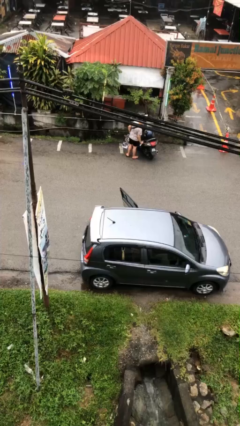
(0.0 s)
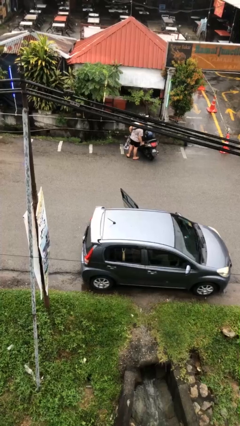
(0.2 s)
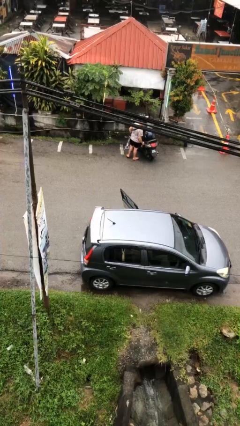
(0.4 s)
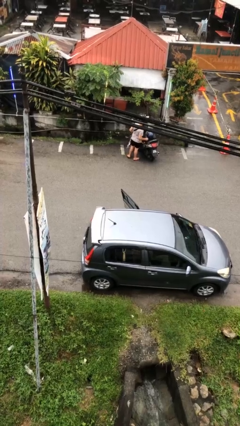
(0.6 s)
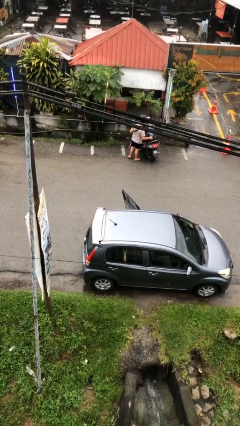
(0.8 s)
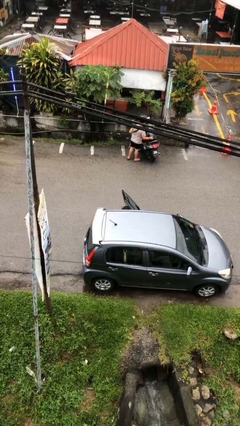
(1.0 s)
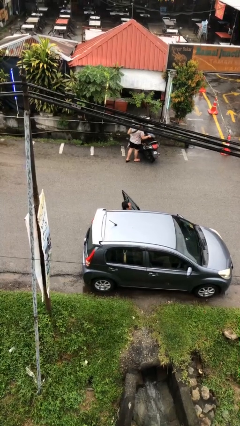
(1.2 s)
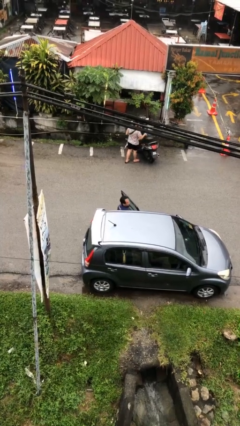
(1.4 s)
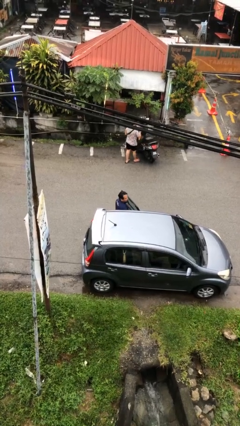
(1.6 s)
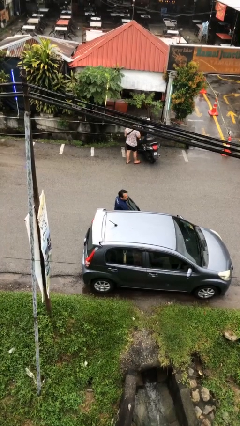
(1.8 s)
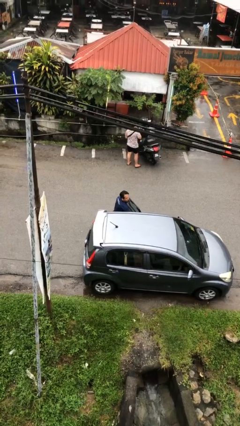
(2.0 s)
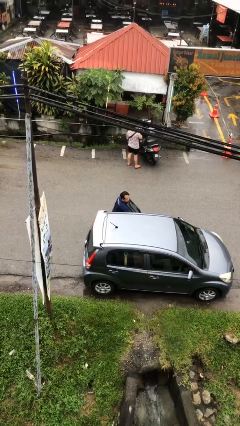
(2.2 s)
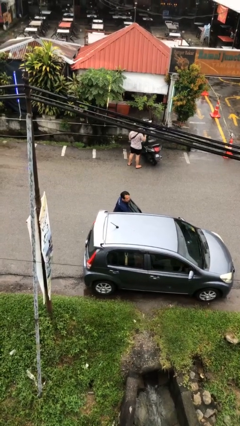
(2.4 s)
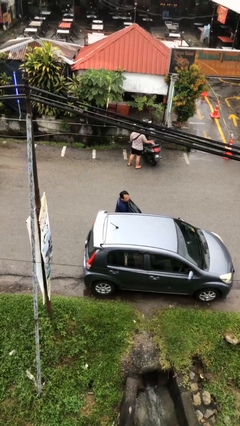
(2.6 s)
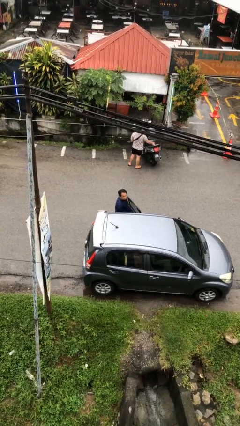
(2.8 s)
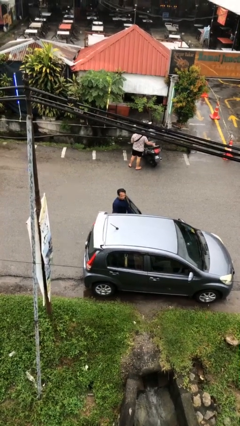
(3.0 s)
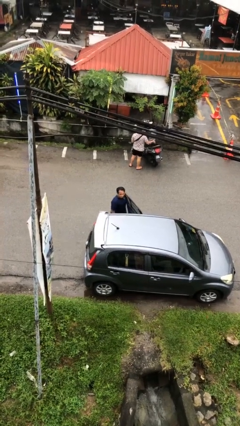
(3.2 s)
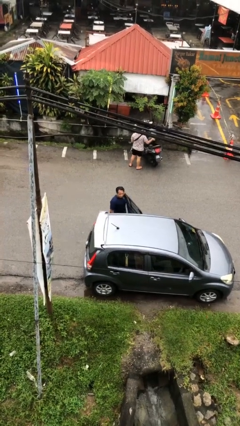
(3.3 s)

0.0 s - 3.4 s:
person exits car

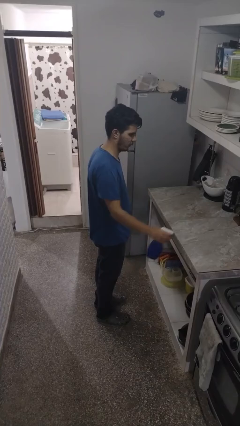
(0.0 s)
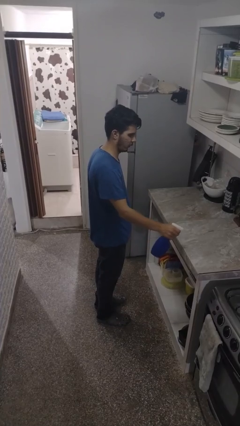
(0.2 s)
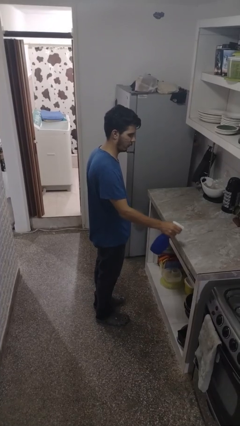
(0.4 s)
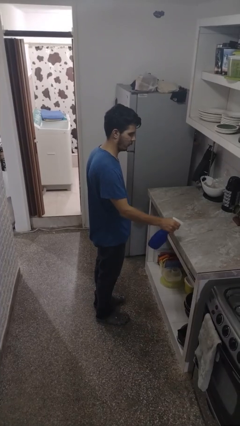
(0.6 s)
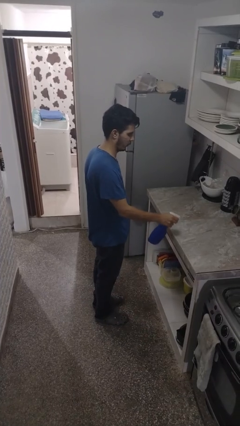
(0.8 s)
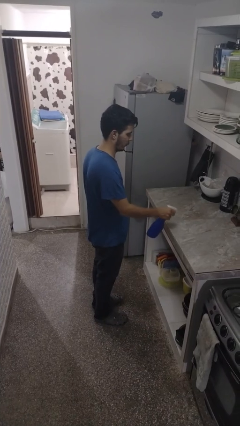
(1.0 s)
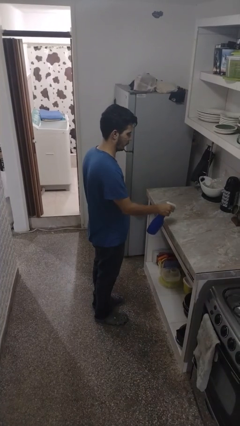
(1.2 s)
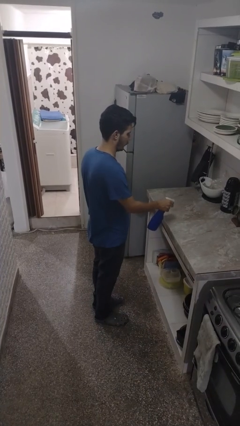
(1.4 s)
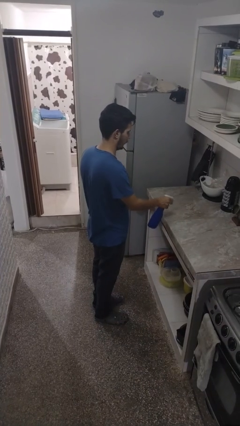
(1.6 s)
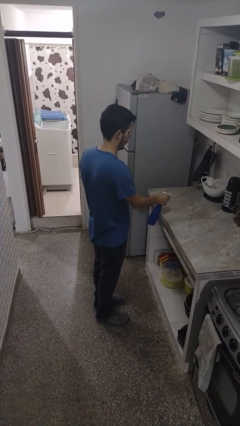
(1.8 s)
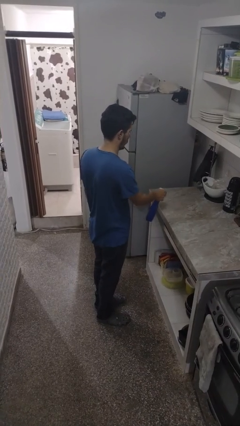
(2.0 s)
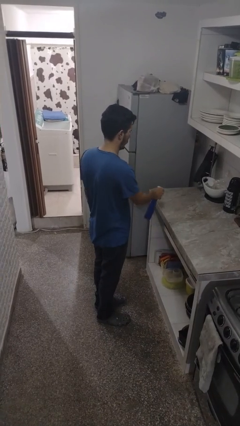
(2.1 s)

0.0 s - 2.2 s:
person sprays from bottle

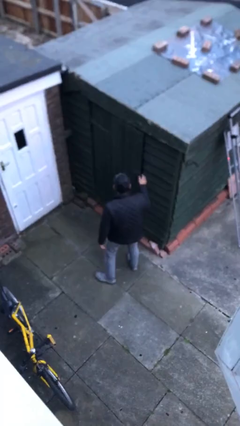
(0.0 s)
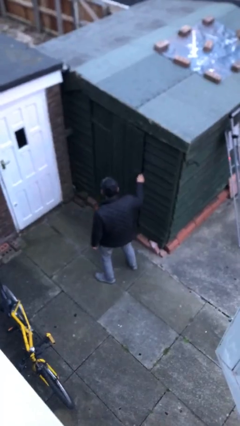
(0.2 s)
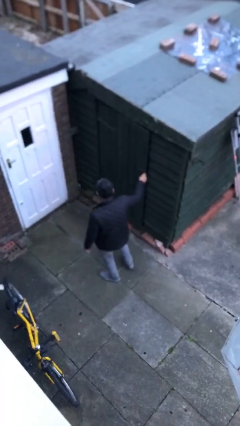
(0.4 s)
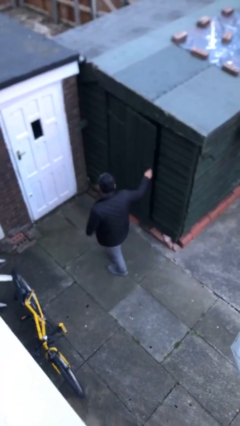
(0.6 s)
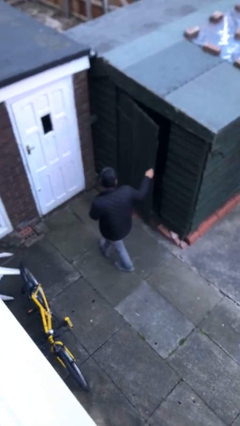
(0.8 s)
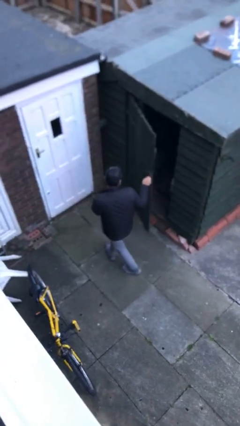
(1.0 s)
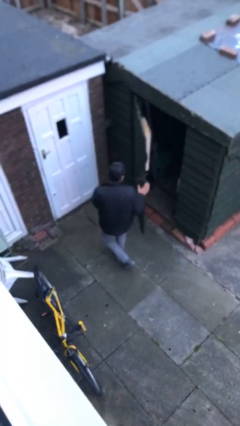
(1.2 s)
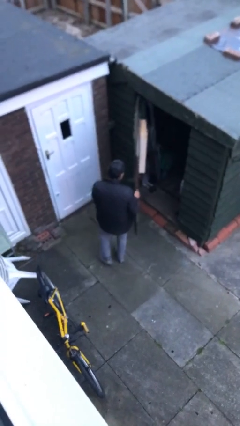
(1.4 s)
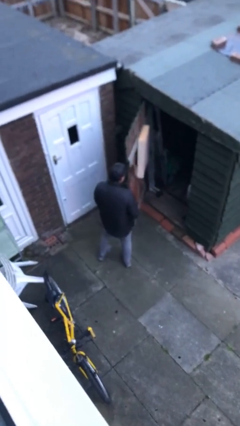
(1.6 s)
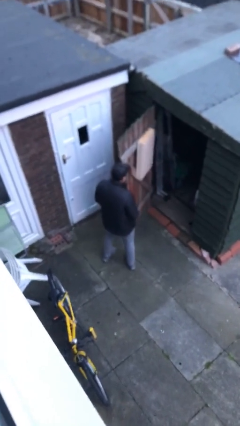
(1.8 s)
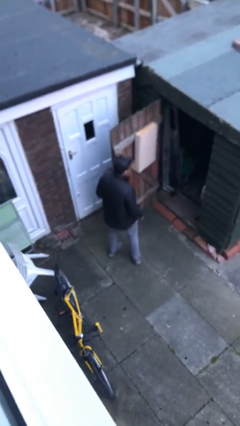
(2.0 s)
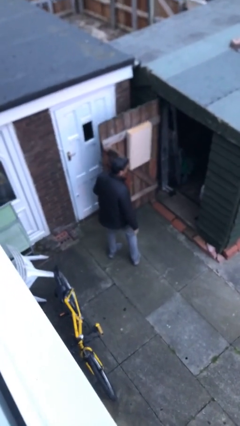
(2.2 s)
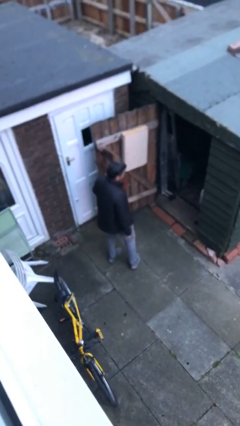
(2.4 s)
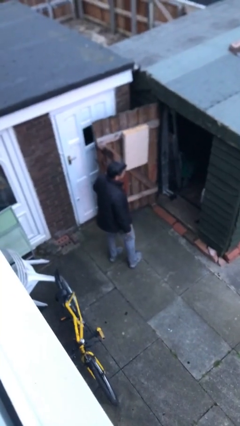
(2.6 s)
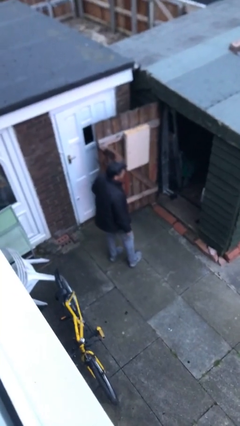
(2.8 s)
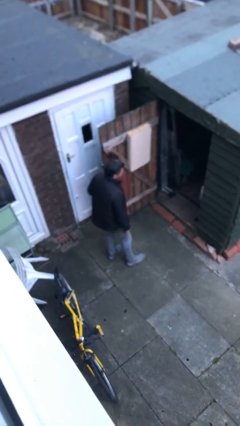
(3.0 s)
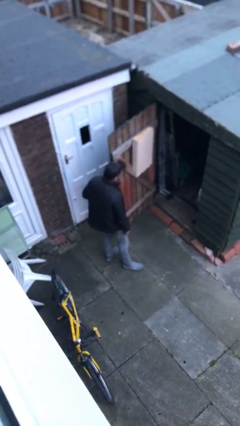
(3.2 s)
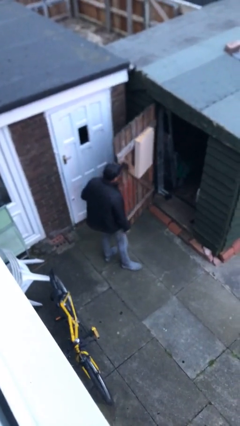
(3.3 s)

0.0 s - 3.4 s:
person opens facility door

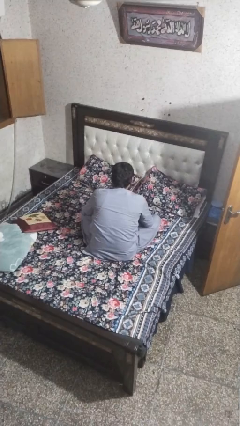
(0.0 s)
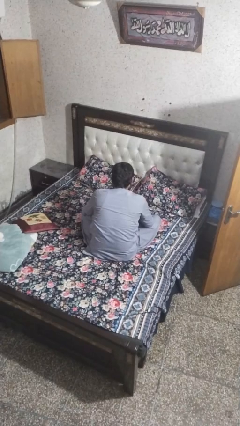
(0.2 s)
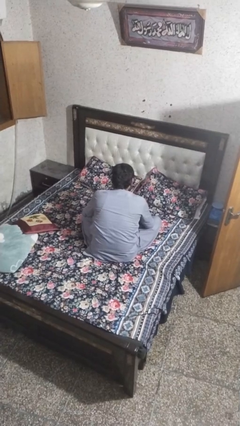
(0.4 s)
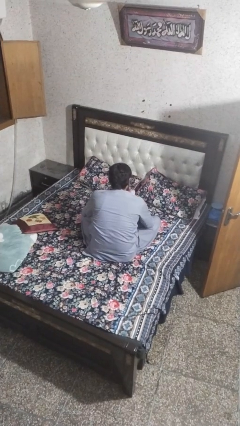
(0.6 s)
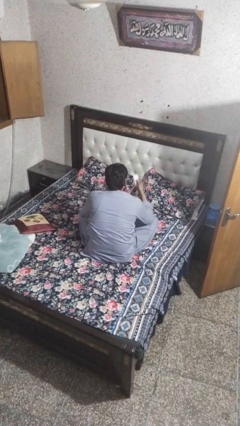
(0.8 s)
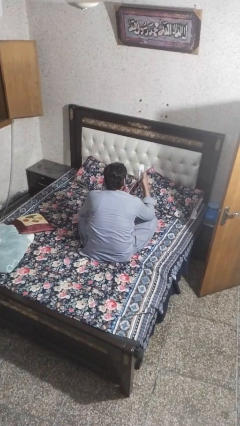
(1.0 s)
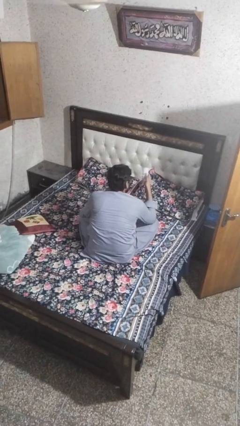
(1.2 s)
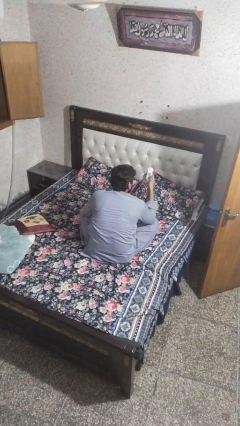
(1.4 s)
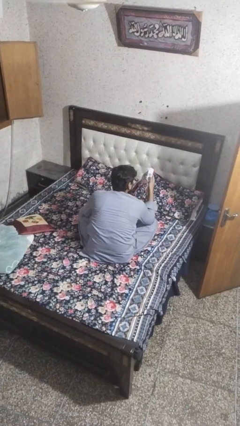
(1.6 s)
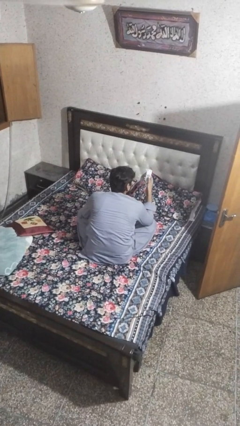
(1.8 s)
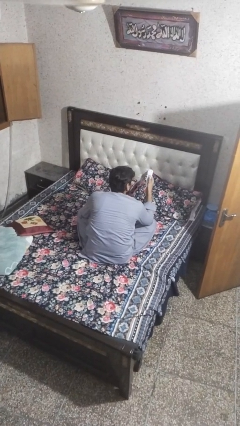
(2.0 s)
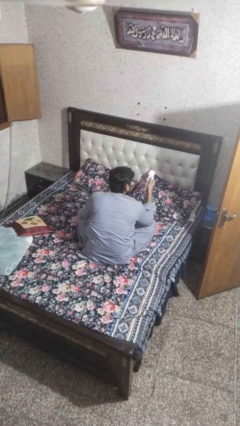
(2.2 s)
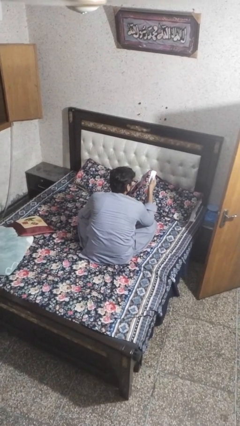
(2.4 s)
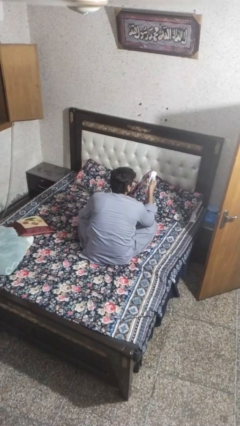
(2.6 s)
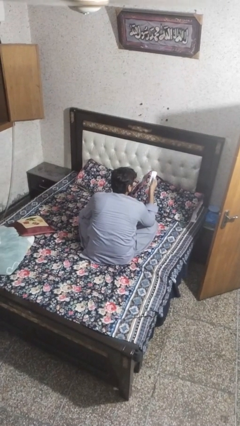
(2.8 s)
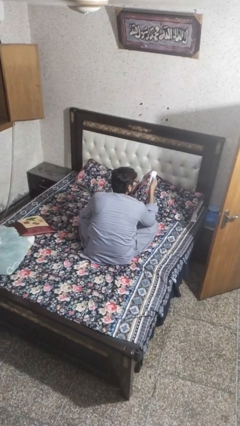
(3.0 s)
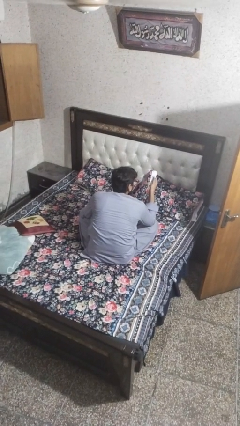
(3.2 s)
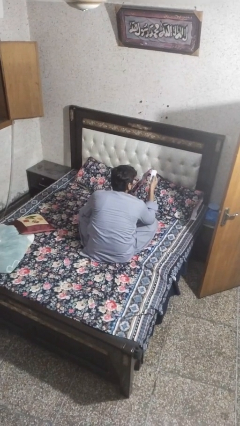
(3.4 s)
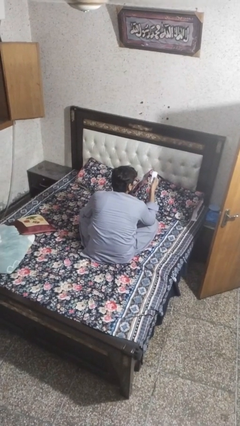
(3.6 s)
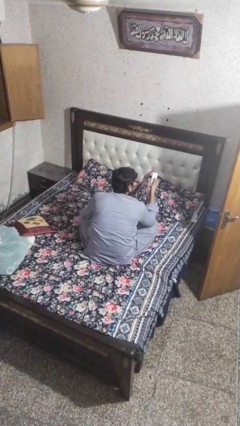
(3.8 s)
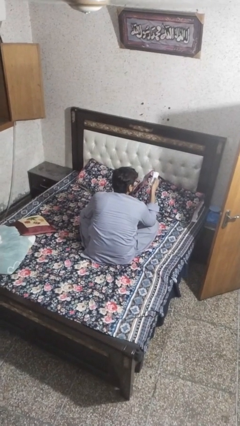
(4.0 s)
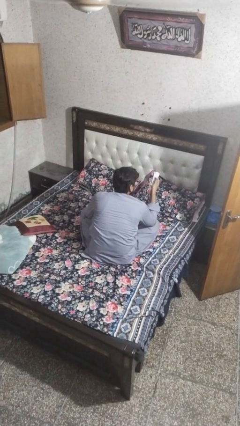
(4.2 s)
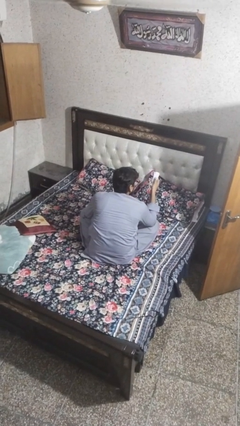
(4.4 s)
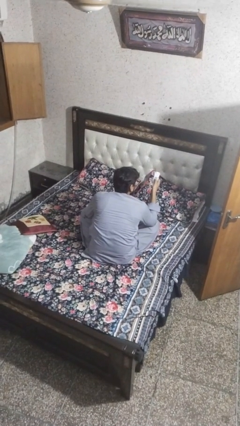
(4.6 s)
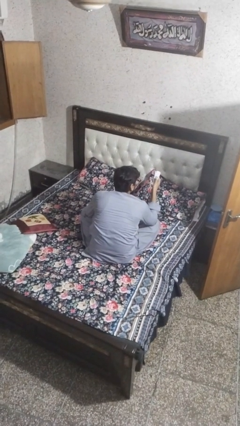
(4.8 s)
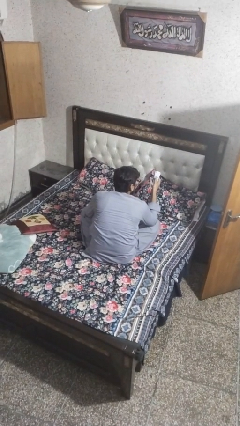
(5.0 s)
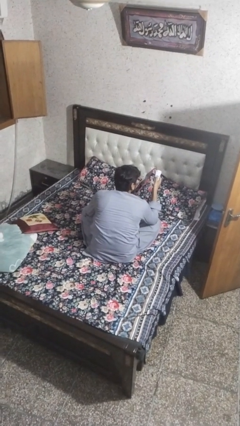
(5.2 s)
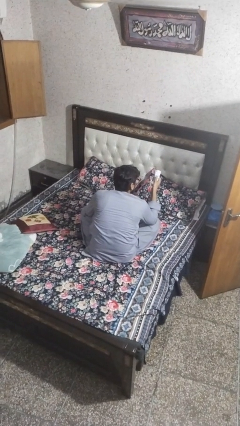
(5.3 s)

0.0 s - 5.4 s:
person uses television remote

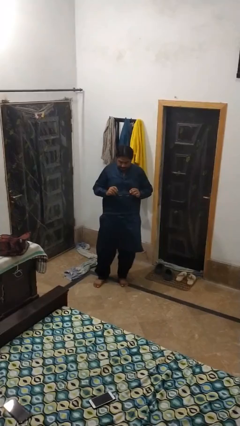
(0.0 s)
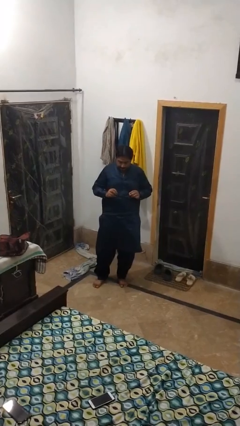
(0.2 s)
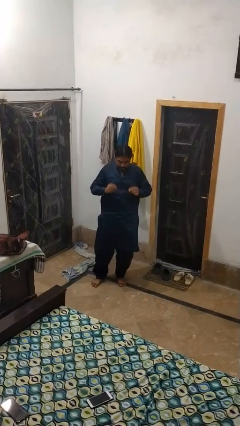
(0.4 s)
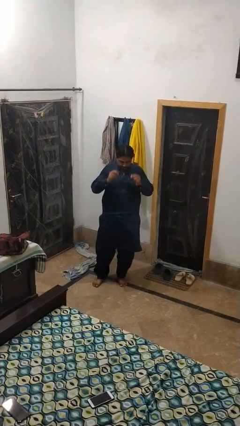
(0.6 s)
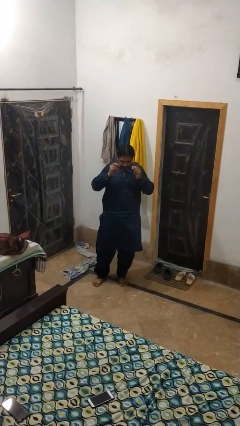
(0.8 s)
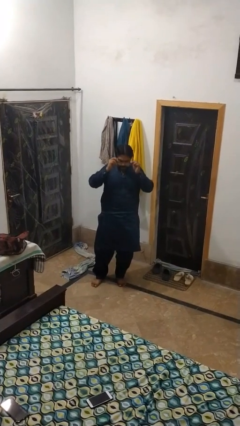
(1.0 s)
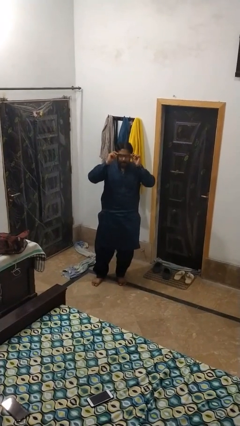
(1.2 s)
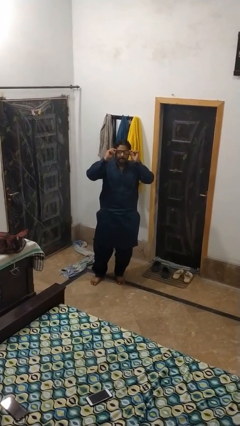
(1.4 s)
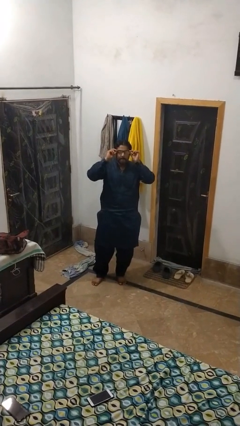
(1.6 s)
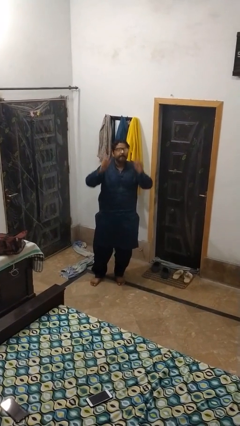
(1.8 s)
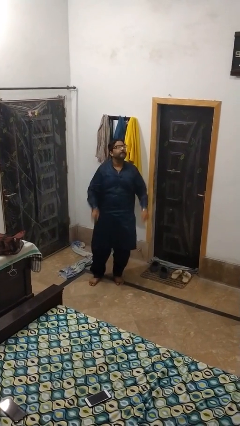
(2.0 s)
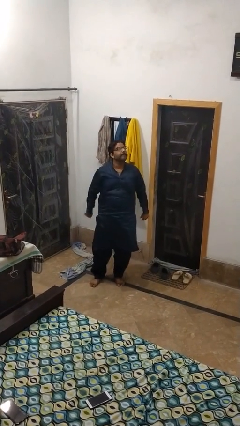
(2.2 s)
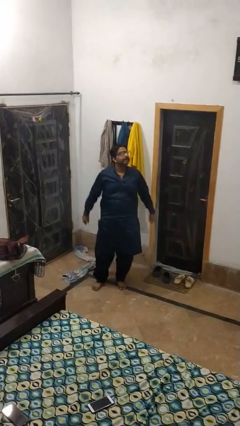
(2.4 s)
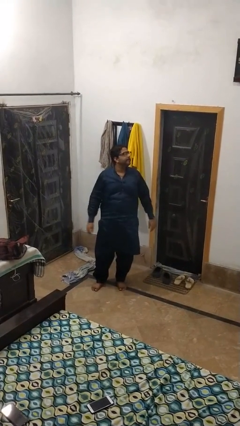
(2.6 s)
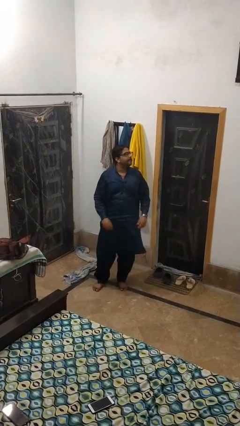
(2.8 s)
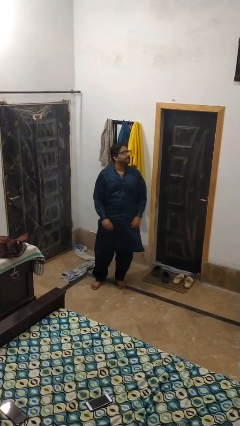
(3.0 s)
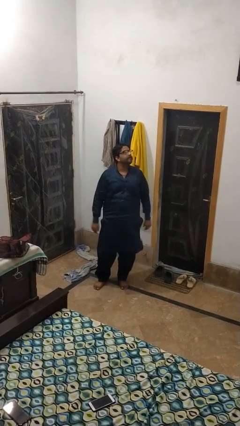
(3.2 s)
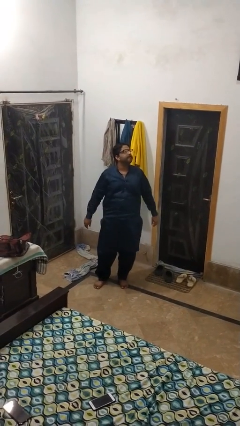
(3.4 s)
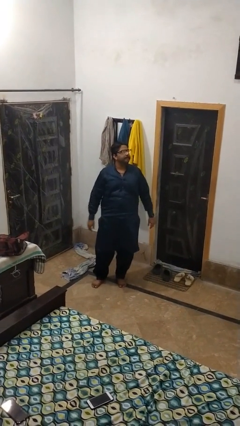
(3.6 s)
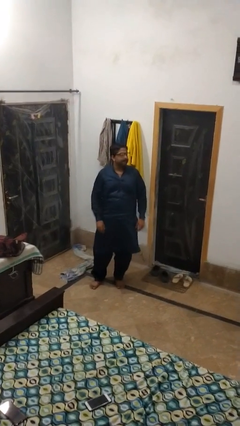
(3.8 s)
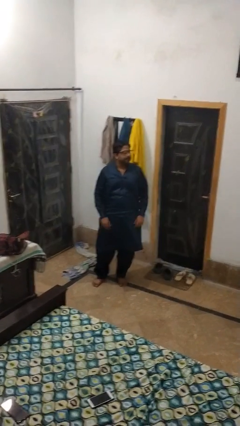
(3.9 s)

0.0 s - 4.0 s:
person puts on glasses
